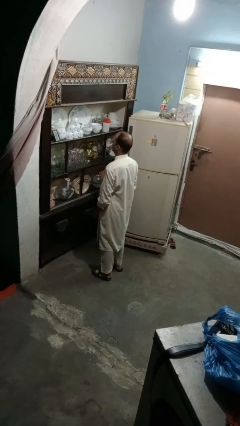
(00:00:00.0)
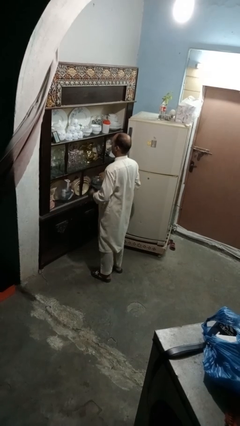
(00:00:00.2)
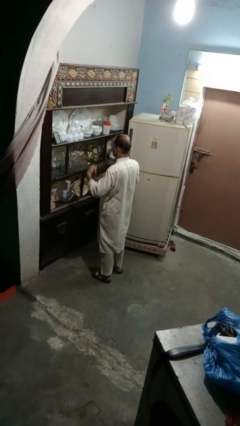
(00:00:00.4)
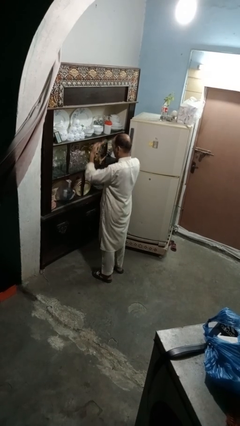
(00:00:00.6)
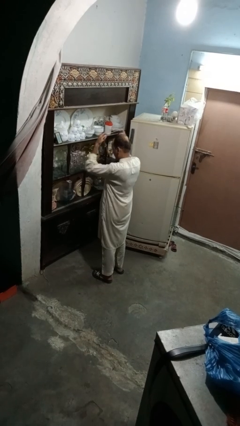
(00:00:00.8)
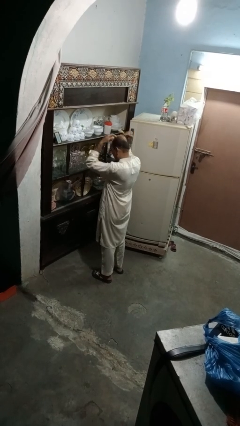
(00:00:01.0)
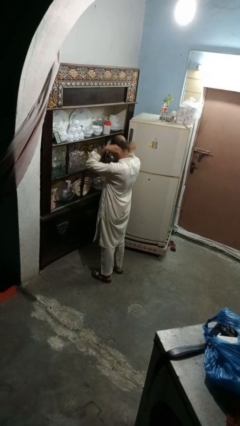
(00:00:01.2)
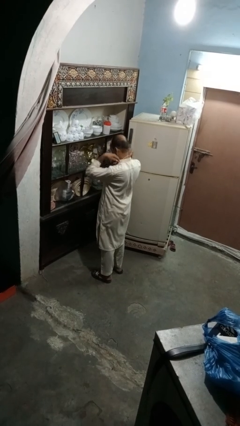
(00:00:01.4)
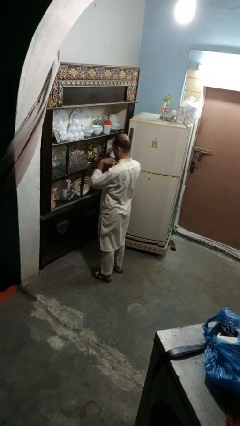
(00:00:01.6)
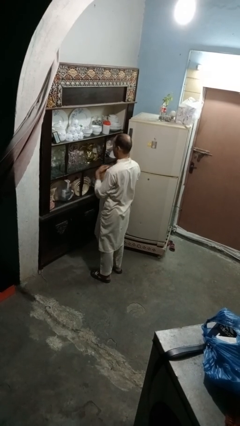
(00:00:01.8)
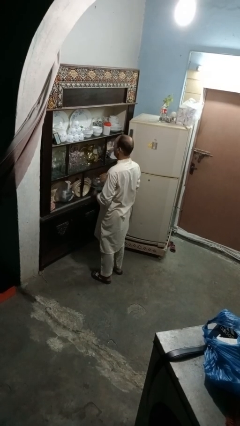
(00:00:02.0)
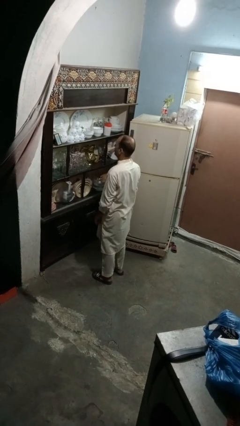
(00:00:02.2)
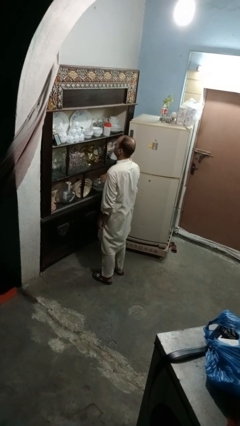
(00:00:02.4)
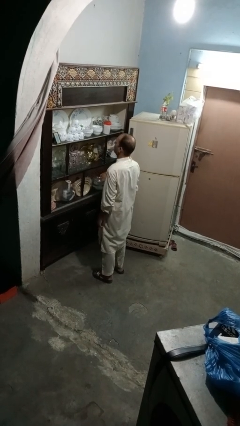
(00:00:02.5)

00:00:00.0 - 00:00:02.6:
person puts on necklace

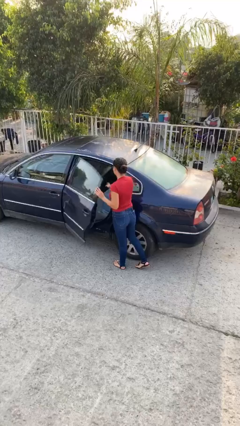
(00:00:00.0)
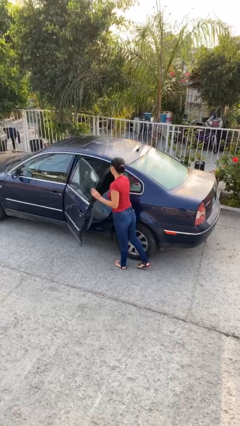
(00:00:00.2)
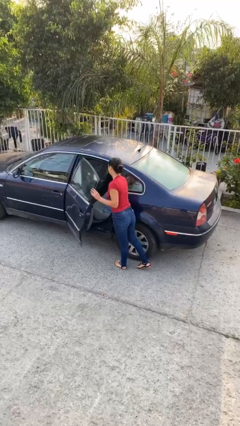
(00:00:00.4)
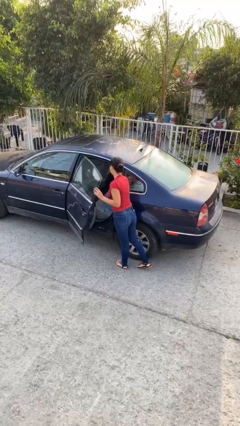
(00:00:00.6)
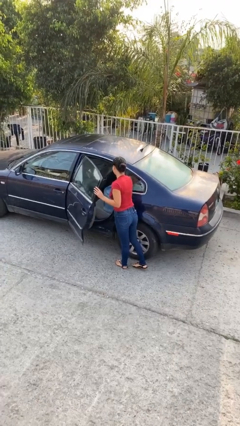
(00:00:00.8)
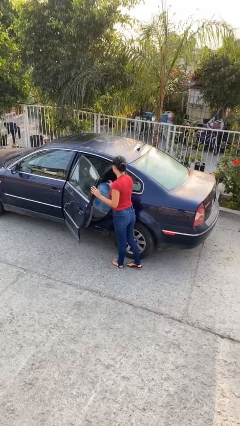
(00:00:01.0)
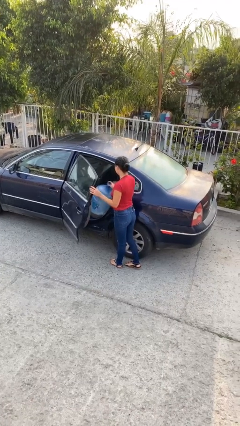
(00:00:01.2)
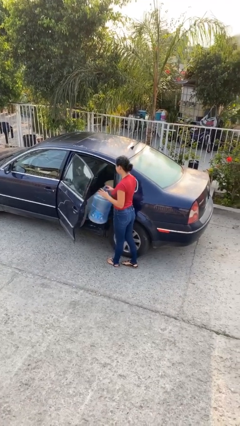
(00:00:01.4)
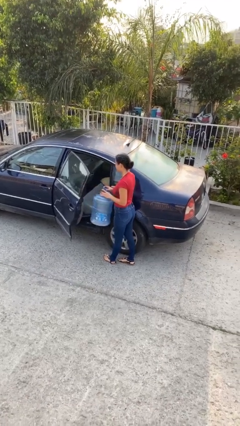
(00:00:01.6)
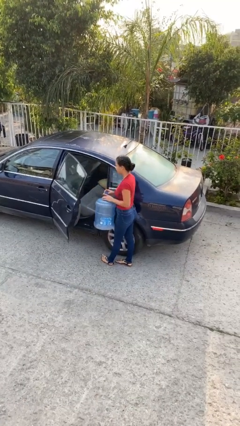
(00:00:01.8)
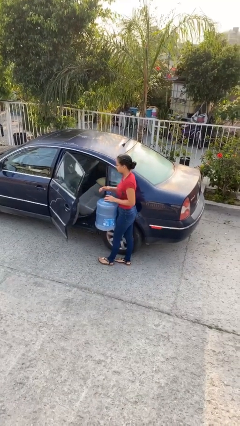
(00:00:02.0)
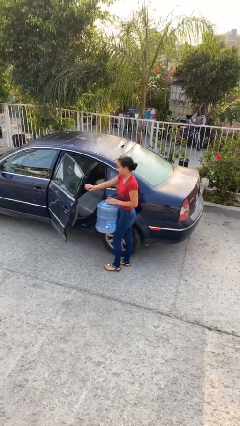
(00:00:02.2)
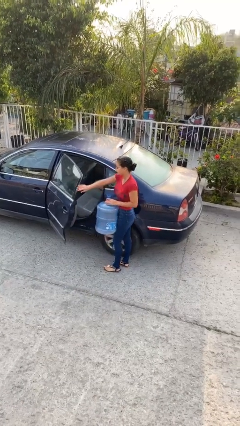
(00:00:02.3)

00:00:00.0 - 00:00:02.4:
person unloads car

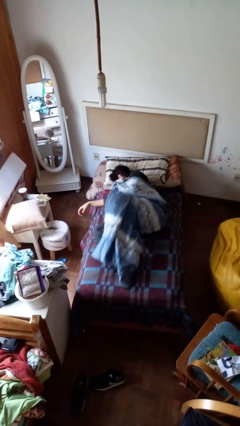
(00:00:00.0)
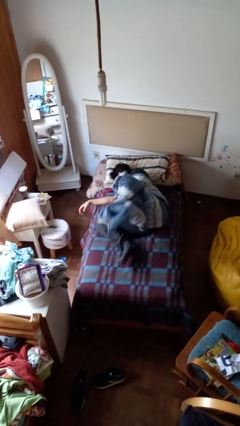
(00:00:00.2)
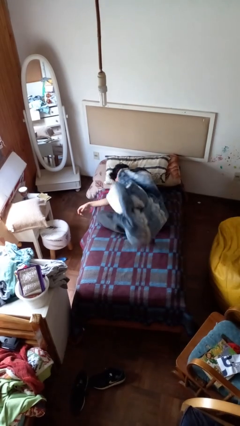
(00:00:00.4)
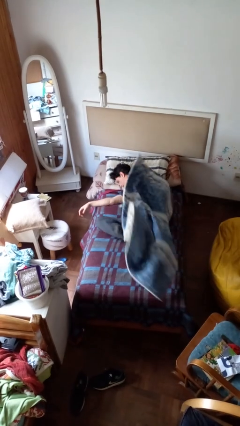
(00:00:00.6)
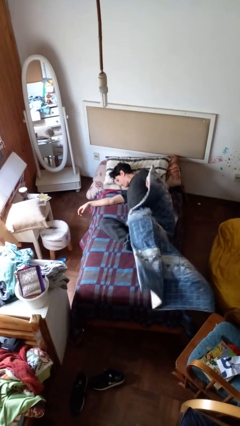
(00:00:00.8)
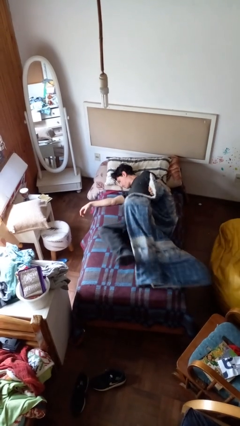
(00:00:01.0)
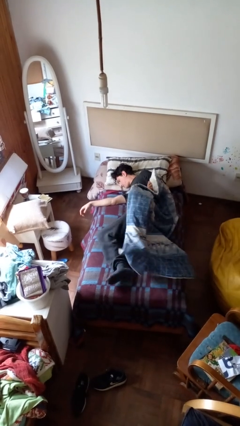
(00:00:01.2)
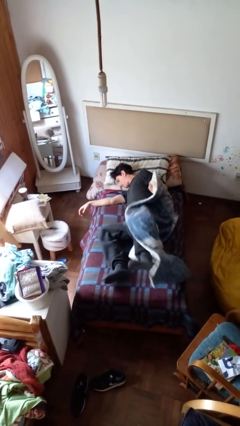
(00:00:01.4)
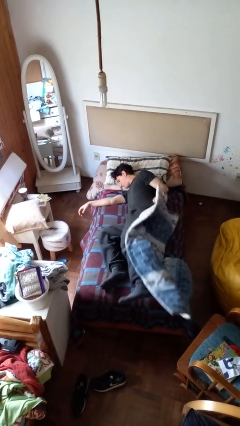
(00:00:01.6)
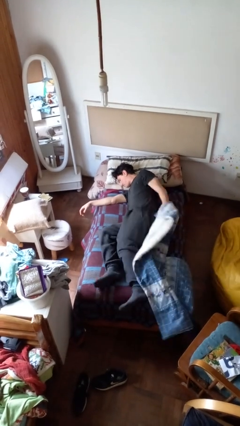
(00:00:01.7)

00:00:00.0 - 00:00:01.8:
person uncovers with bedsheets

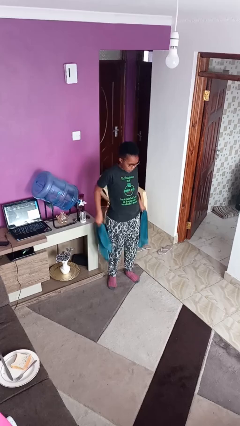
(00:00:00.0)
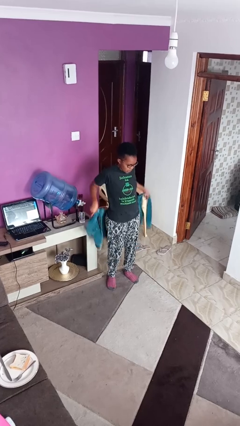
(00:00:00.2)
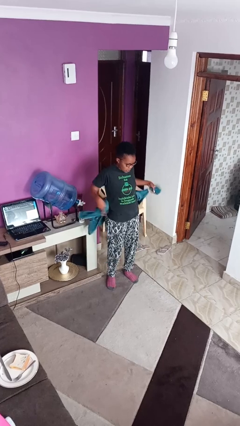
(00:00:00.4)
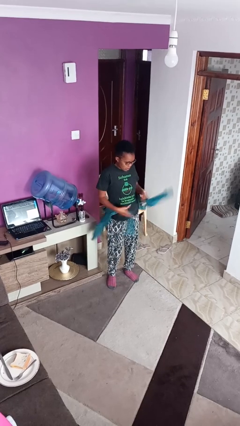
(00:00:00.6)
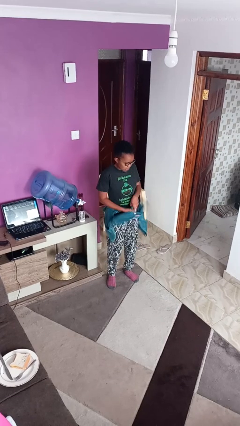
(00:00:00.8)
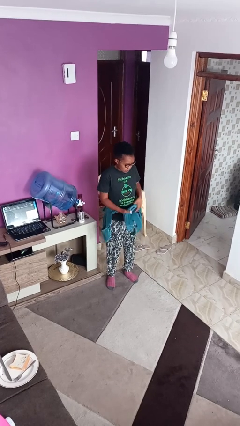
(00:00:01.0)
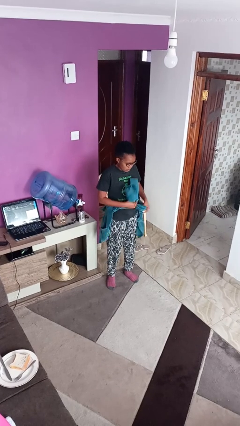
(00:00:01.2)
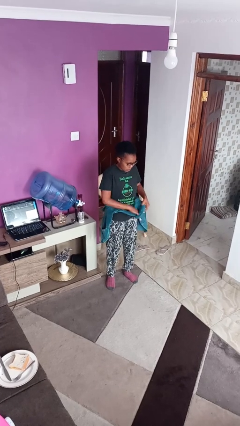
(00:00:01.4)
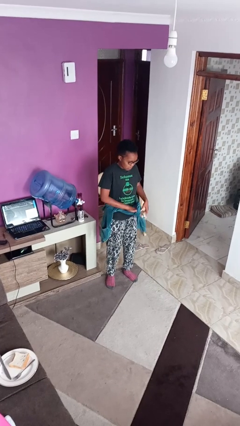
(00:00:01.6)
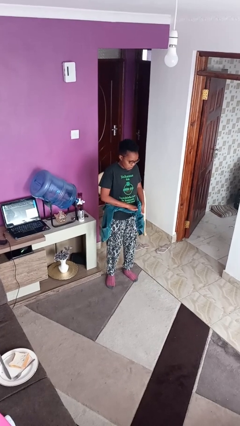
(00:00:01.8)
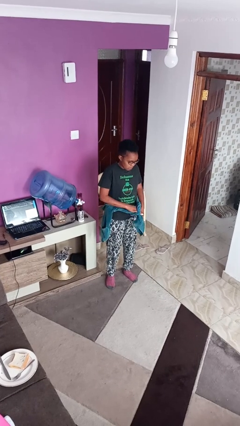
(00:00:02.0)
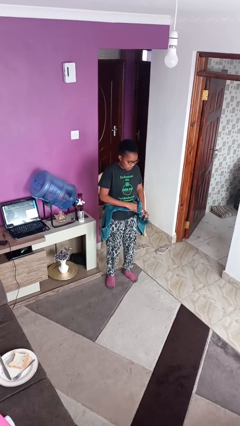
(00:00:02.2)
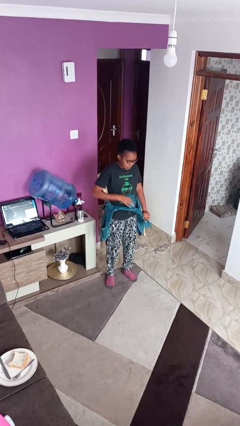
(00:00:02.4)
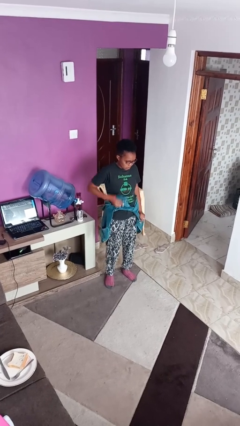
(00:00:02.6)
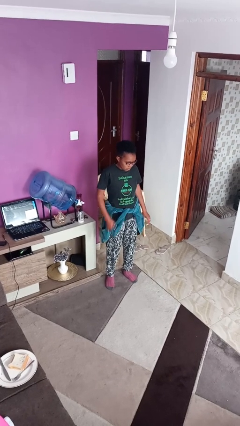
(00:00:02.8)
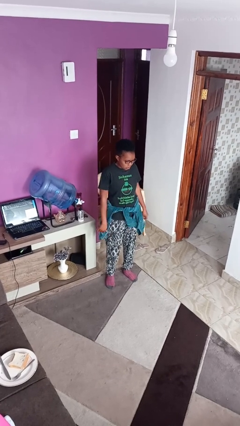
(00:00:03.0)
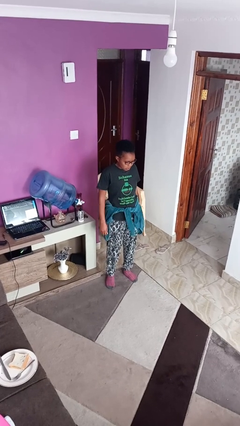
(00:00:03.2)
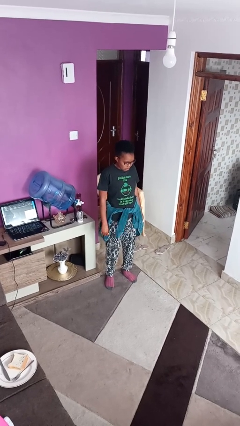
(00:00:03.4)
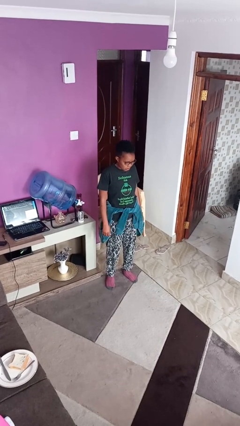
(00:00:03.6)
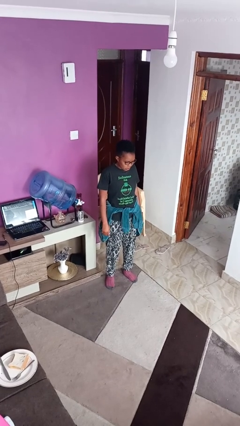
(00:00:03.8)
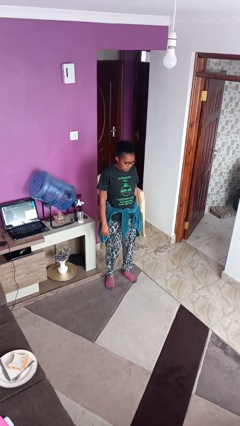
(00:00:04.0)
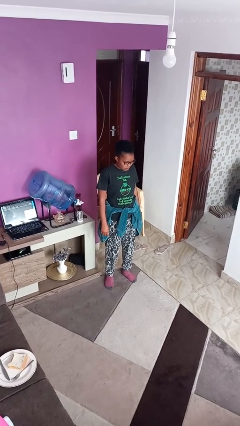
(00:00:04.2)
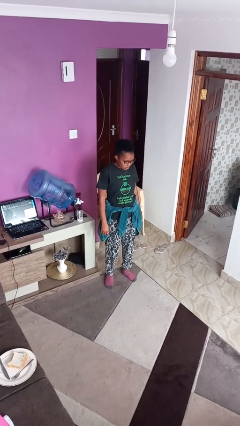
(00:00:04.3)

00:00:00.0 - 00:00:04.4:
person ties jacket around waist

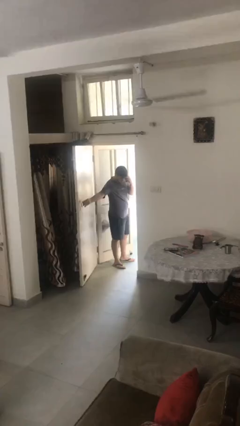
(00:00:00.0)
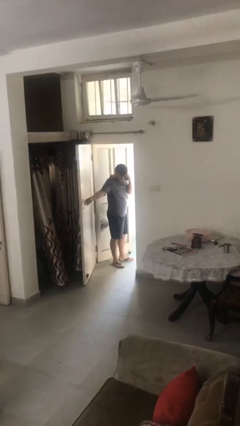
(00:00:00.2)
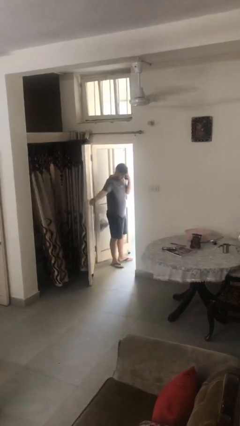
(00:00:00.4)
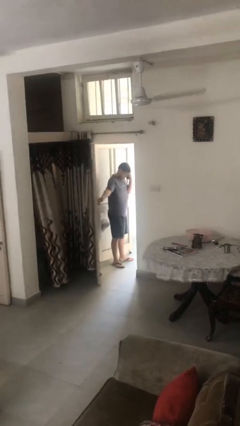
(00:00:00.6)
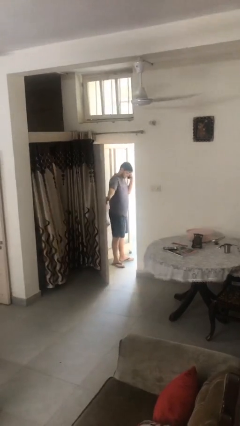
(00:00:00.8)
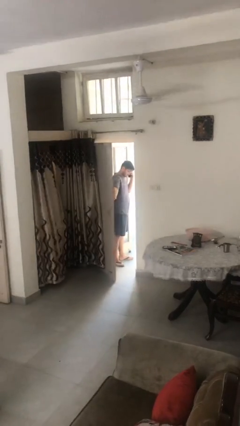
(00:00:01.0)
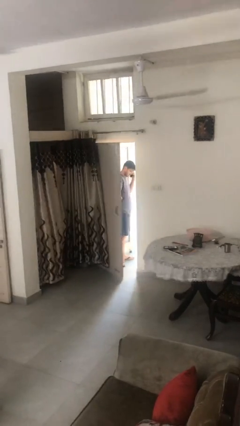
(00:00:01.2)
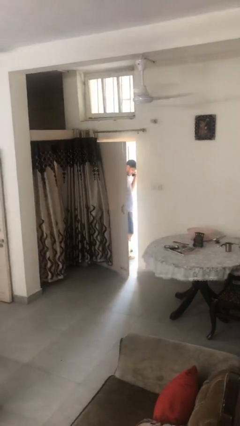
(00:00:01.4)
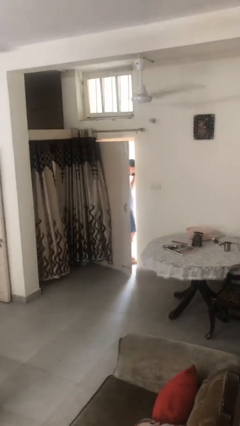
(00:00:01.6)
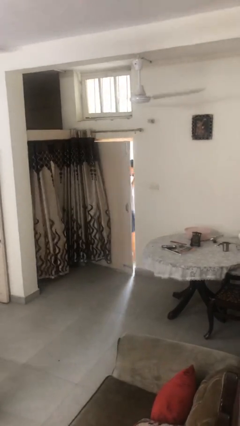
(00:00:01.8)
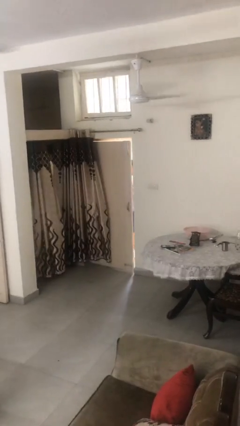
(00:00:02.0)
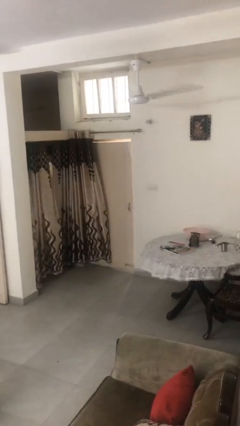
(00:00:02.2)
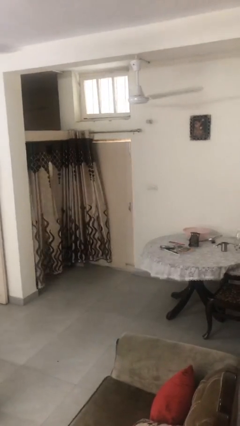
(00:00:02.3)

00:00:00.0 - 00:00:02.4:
person closes facility door

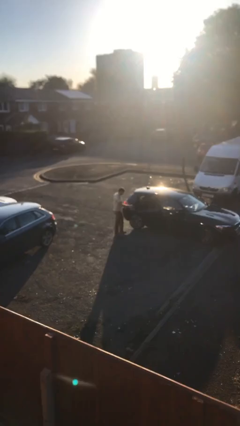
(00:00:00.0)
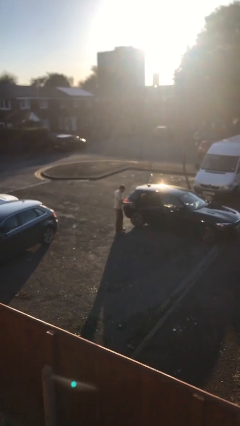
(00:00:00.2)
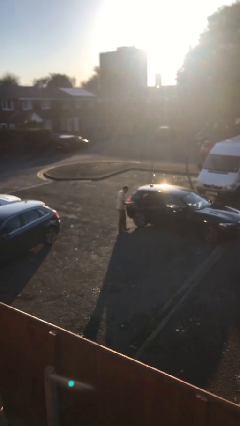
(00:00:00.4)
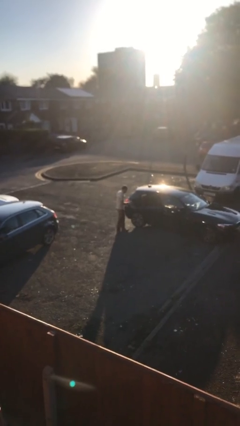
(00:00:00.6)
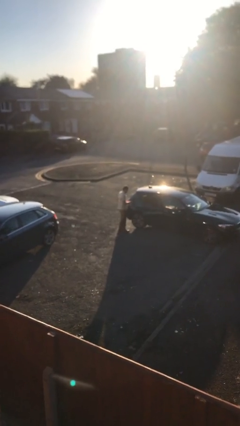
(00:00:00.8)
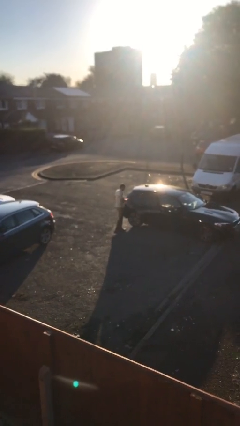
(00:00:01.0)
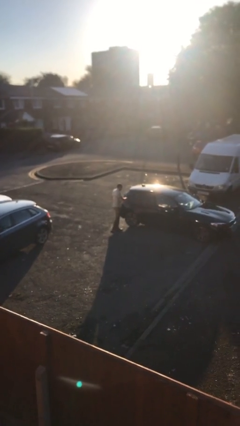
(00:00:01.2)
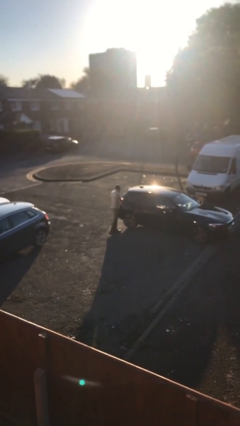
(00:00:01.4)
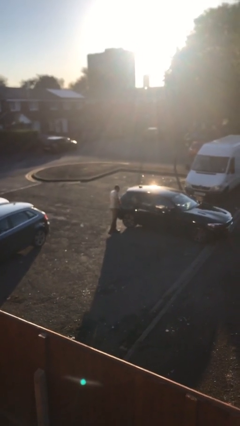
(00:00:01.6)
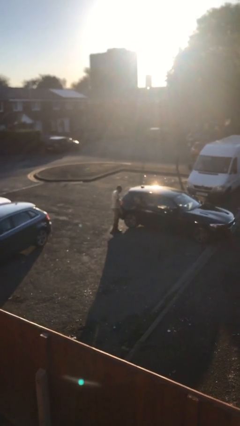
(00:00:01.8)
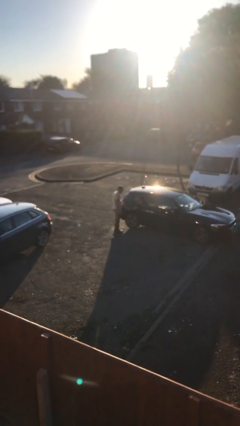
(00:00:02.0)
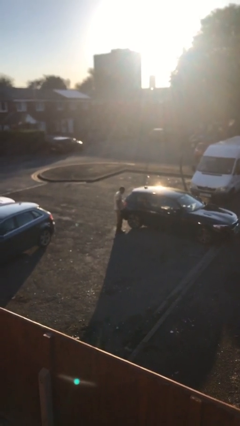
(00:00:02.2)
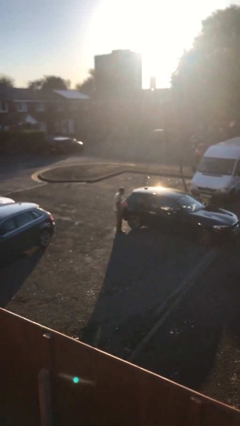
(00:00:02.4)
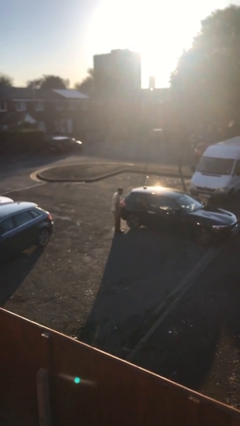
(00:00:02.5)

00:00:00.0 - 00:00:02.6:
person closes car door

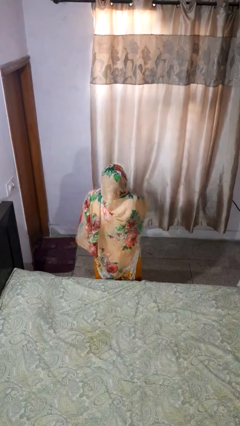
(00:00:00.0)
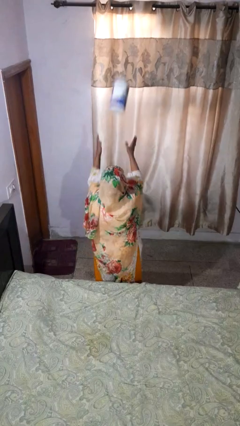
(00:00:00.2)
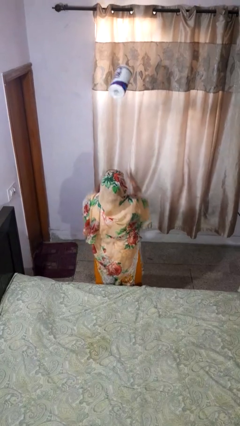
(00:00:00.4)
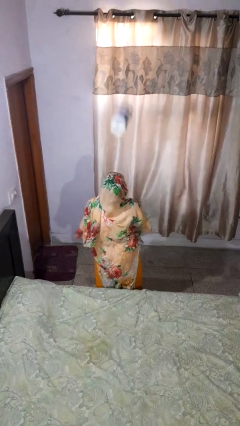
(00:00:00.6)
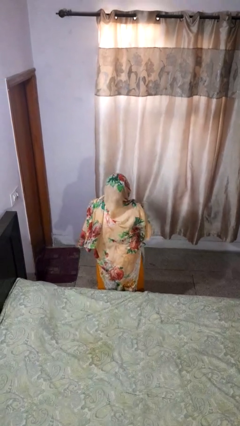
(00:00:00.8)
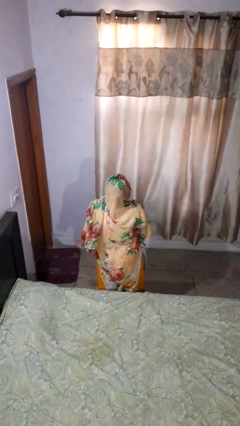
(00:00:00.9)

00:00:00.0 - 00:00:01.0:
person drops object
